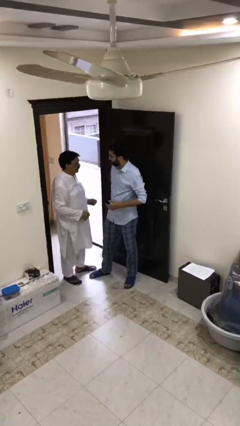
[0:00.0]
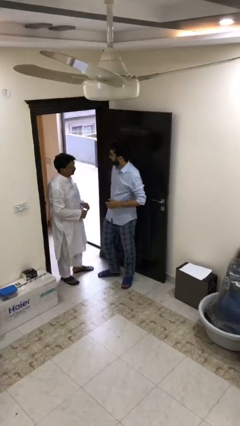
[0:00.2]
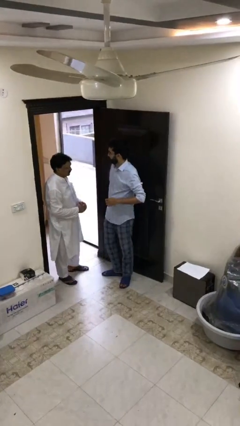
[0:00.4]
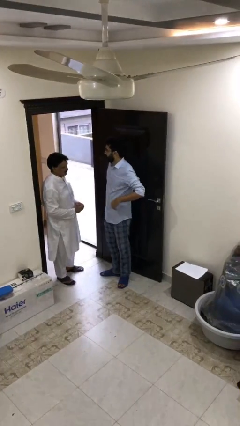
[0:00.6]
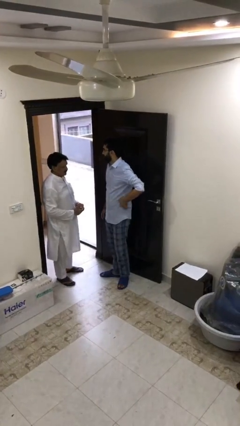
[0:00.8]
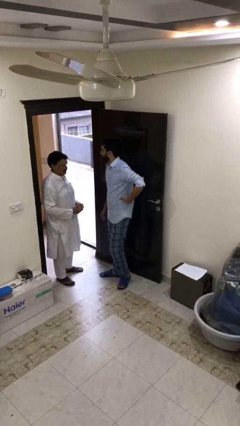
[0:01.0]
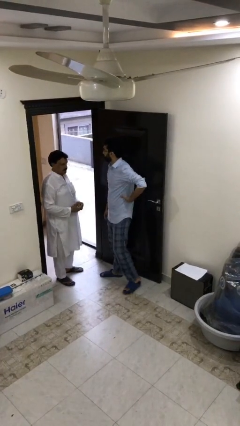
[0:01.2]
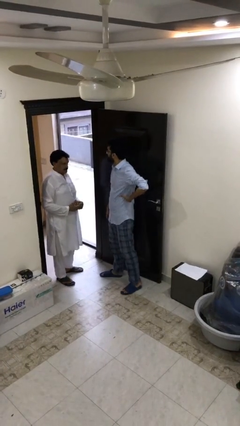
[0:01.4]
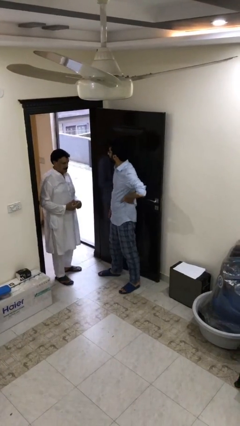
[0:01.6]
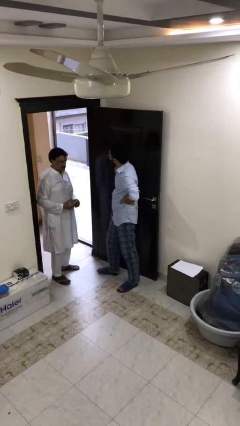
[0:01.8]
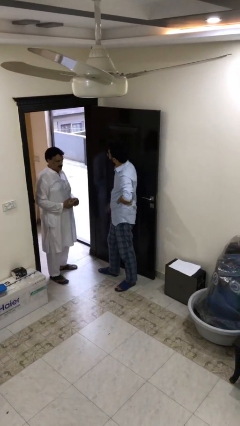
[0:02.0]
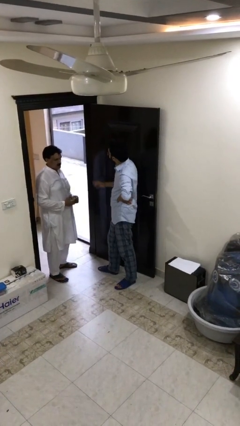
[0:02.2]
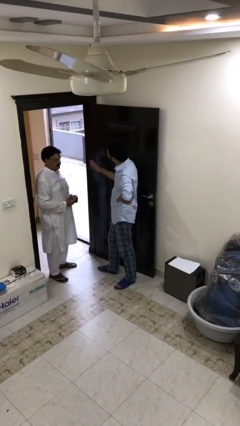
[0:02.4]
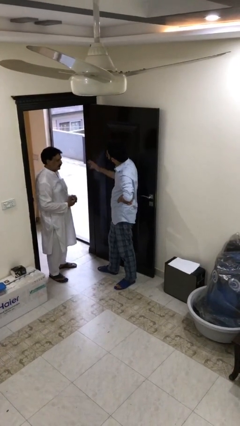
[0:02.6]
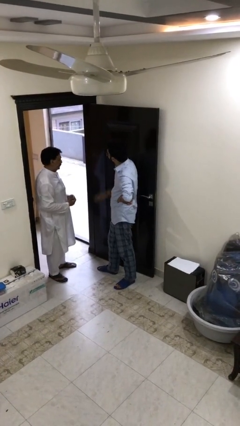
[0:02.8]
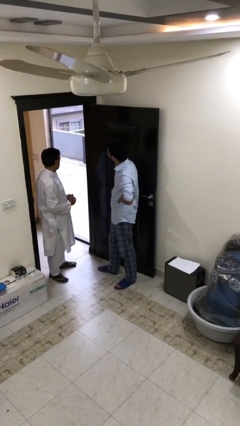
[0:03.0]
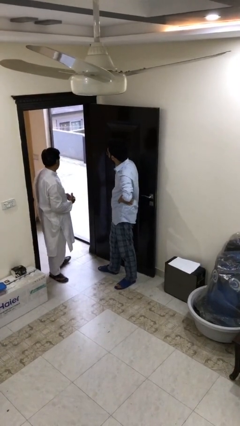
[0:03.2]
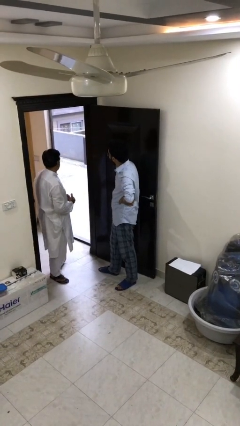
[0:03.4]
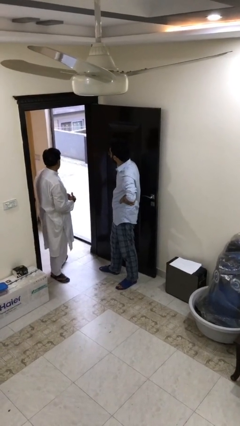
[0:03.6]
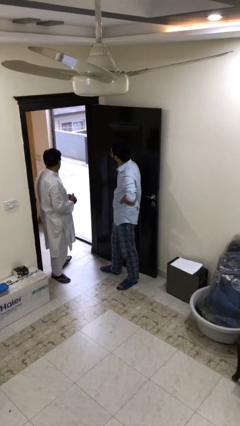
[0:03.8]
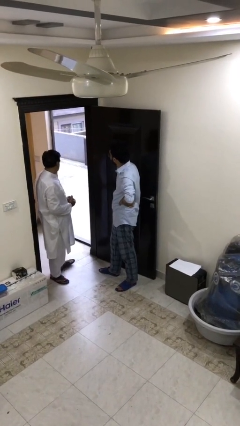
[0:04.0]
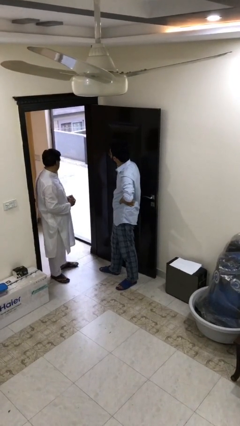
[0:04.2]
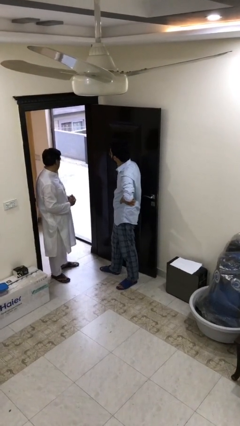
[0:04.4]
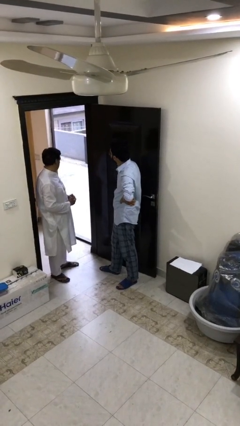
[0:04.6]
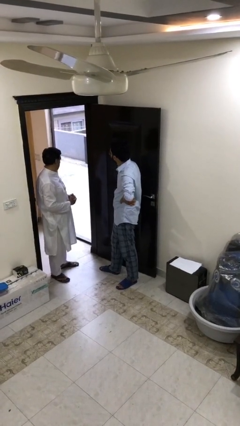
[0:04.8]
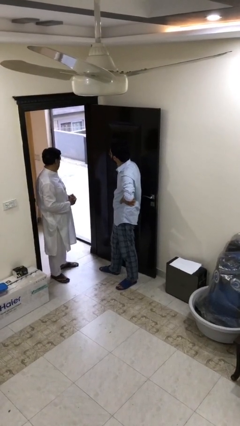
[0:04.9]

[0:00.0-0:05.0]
person talks to person

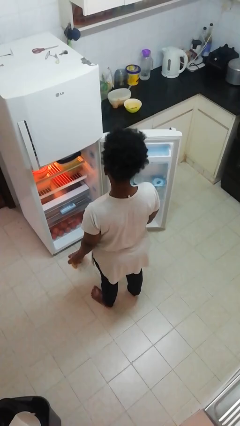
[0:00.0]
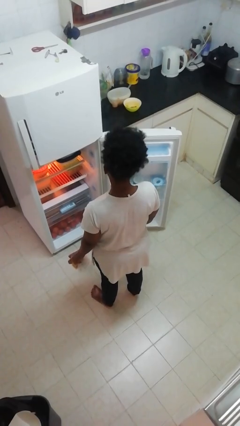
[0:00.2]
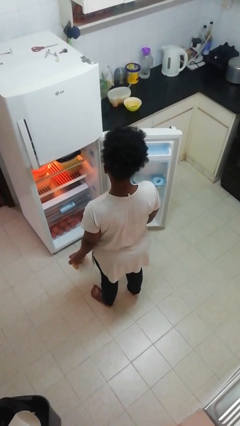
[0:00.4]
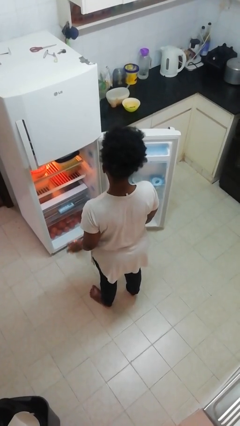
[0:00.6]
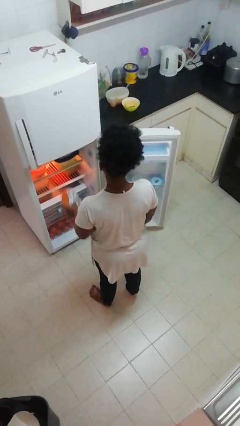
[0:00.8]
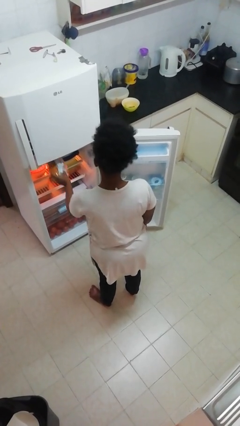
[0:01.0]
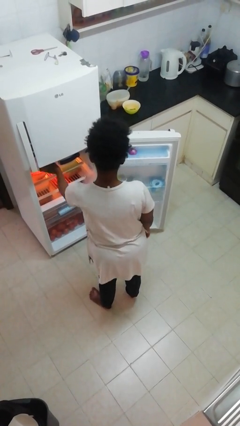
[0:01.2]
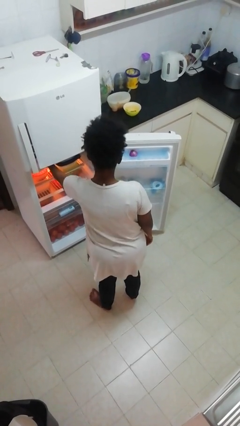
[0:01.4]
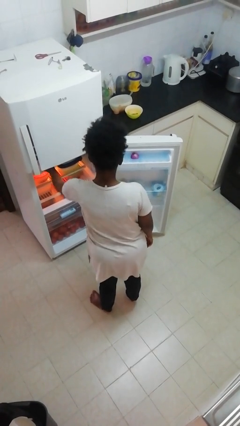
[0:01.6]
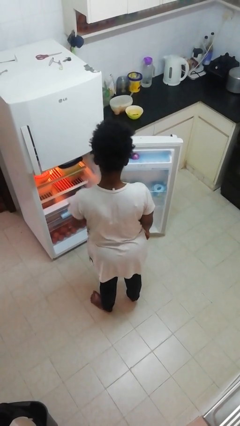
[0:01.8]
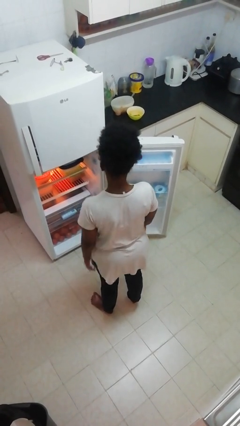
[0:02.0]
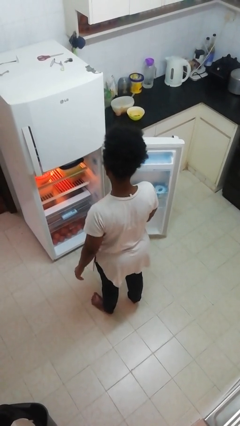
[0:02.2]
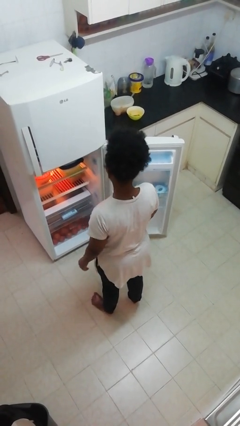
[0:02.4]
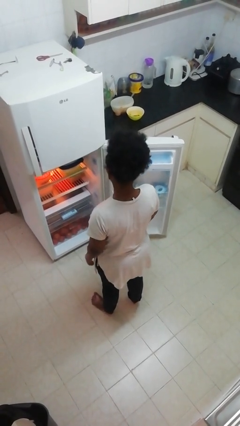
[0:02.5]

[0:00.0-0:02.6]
person puts object into refrigerator

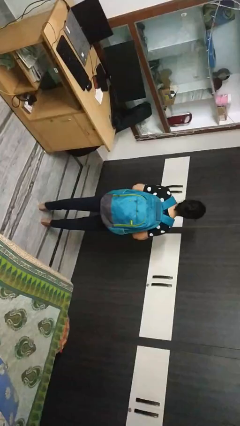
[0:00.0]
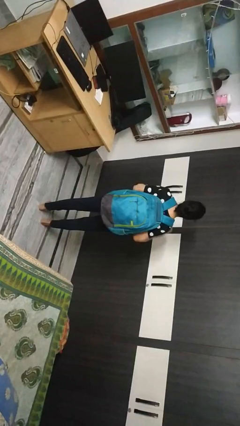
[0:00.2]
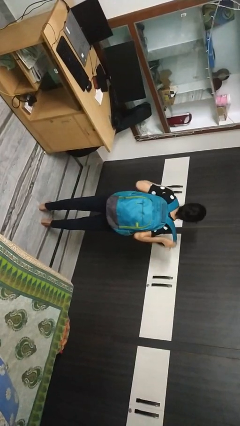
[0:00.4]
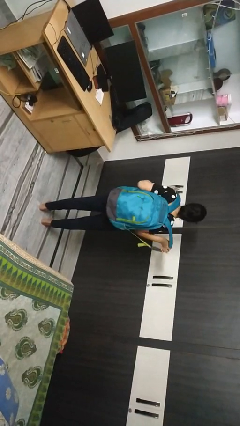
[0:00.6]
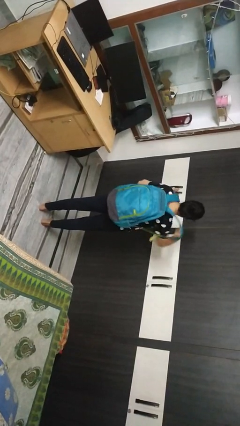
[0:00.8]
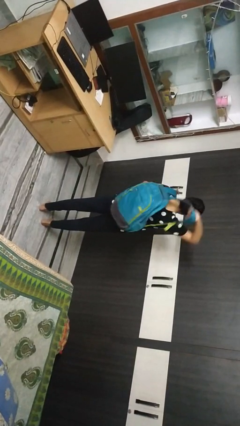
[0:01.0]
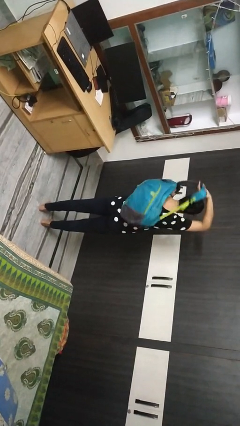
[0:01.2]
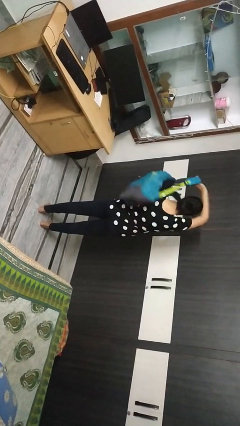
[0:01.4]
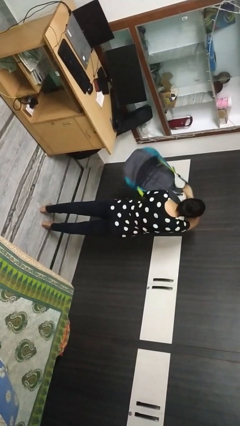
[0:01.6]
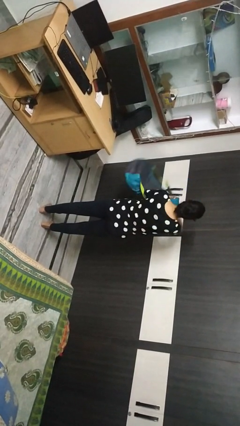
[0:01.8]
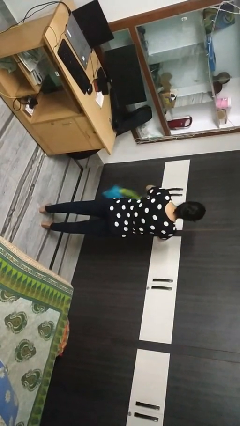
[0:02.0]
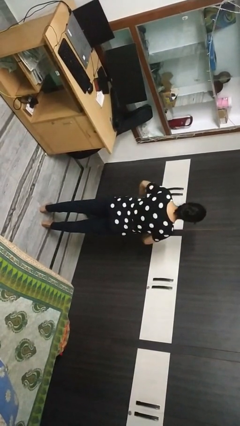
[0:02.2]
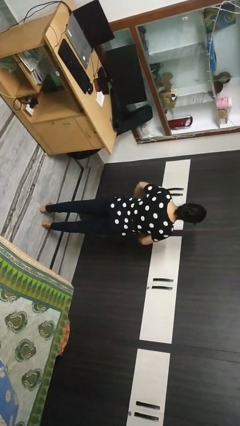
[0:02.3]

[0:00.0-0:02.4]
person takes off backpack

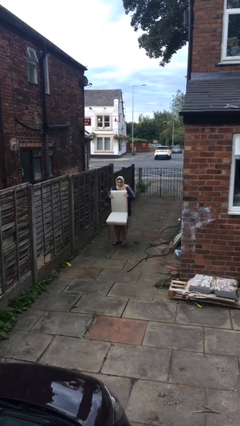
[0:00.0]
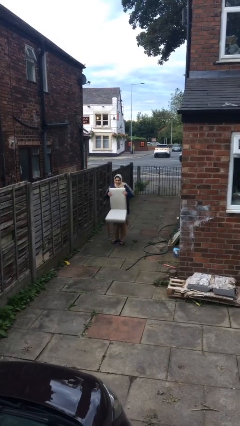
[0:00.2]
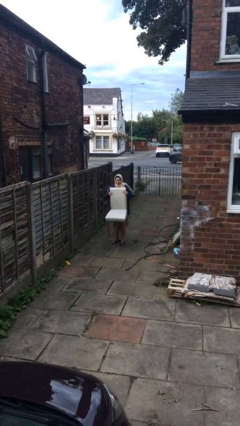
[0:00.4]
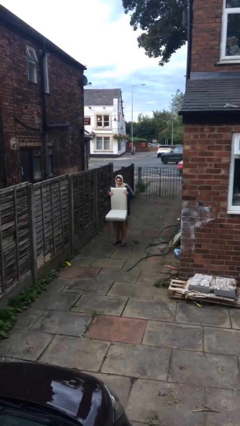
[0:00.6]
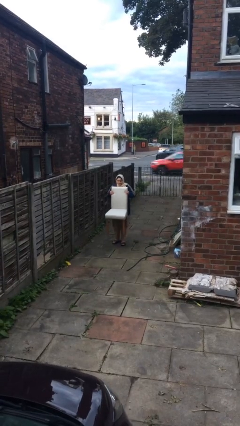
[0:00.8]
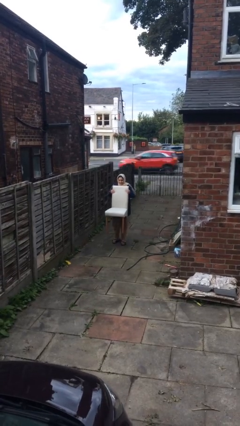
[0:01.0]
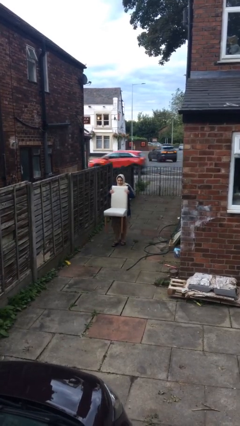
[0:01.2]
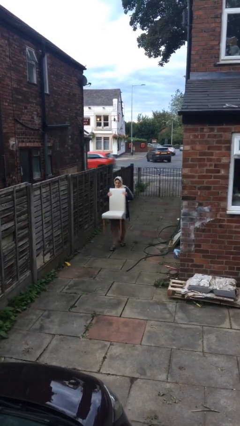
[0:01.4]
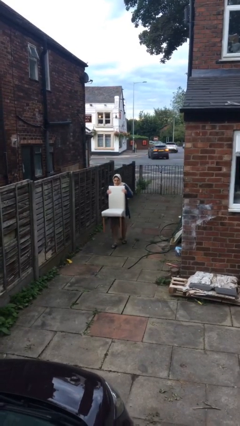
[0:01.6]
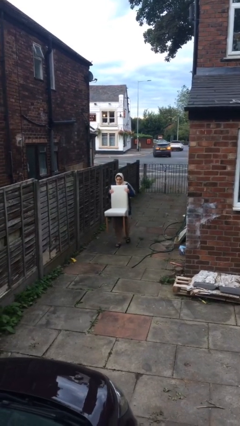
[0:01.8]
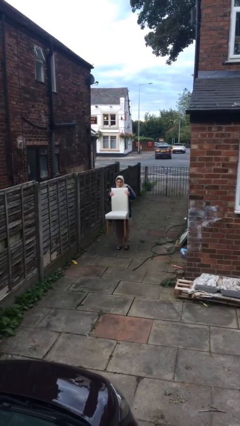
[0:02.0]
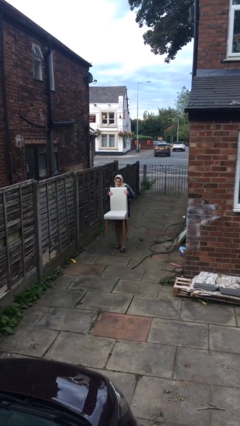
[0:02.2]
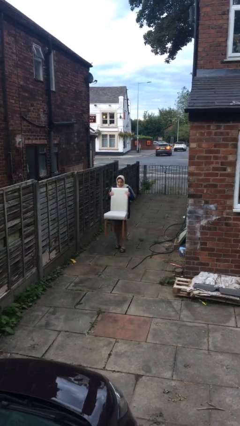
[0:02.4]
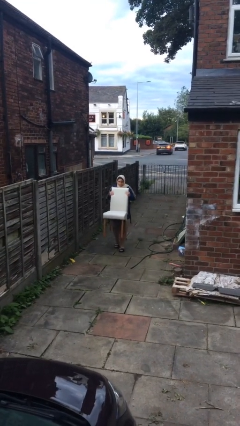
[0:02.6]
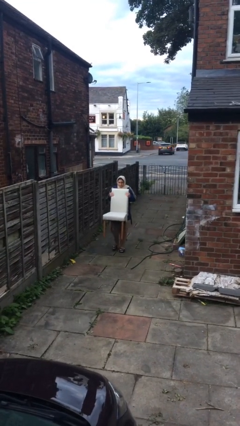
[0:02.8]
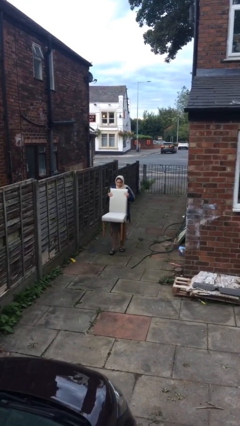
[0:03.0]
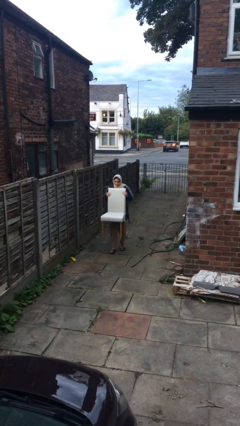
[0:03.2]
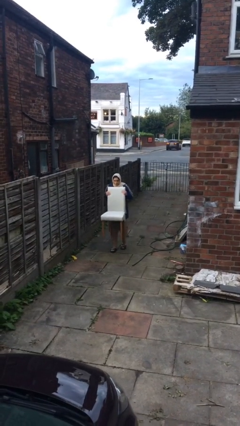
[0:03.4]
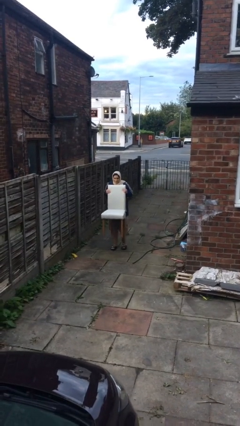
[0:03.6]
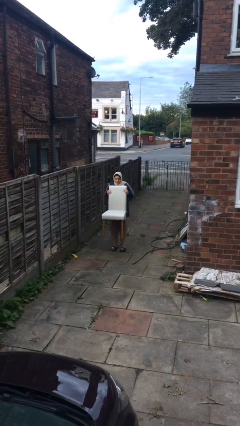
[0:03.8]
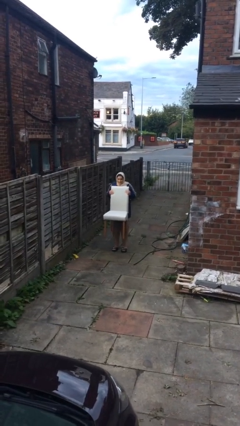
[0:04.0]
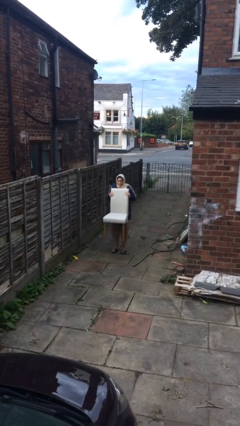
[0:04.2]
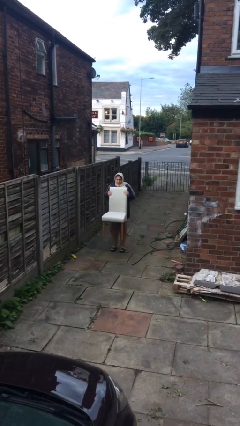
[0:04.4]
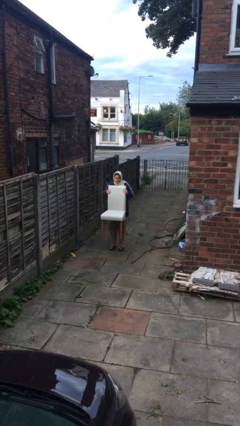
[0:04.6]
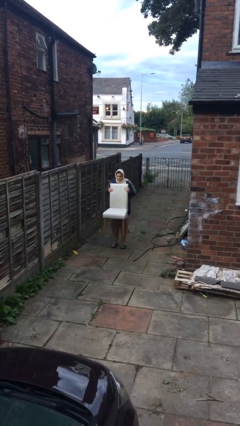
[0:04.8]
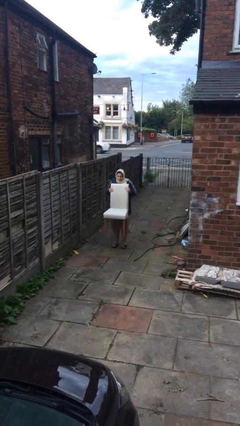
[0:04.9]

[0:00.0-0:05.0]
person carries heavy object

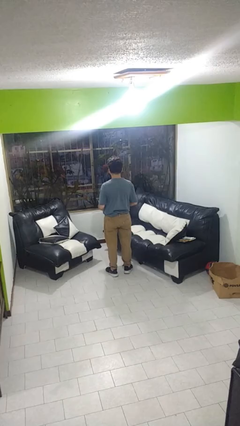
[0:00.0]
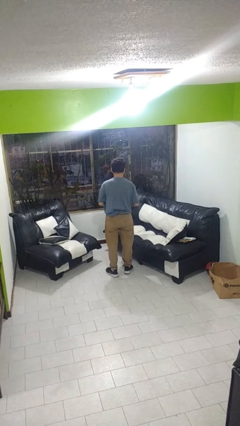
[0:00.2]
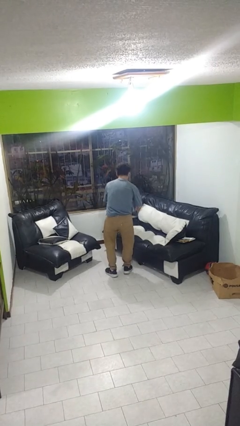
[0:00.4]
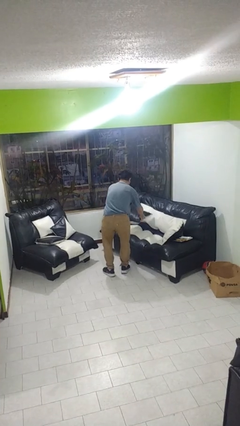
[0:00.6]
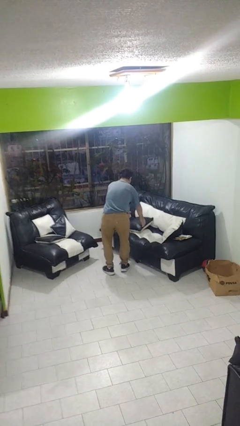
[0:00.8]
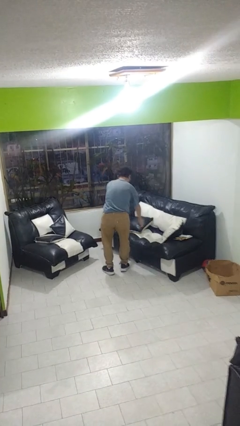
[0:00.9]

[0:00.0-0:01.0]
person puts down object on couch

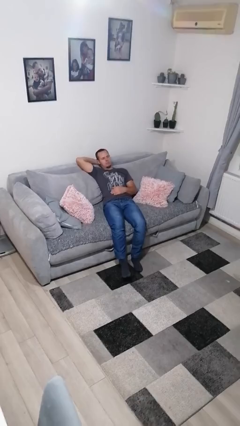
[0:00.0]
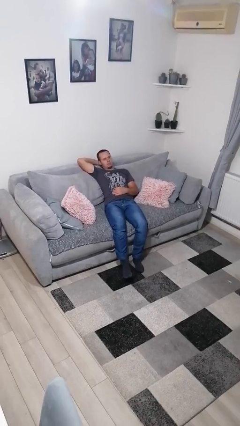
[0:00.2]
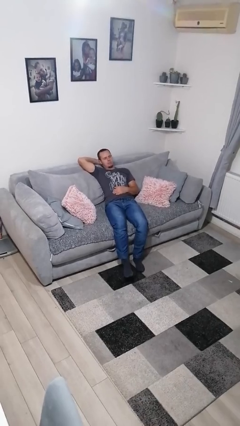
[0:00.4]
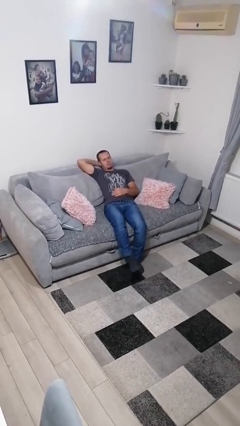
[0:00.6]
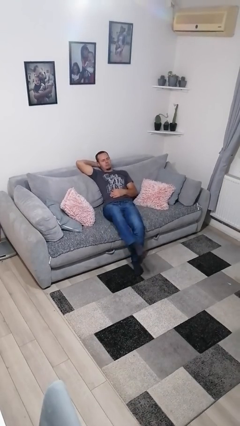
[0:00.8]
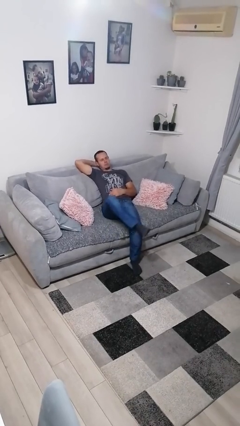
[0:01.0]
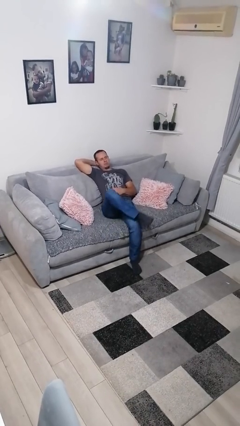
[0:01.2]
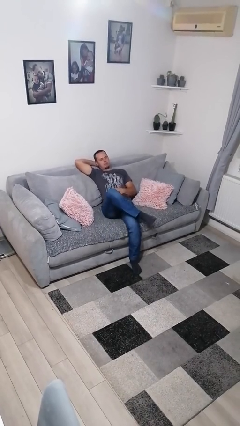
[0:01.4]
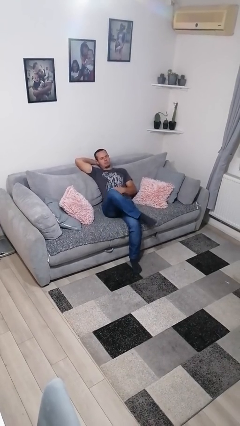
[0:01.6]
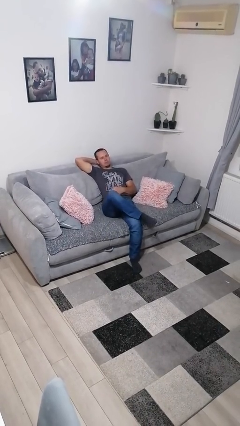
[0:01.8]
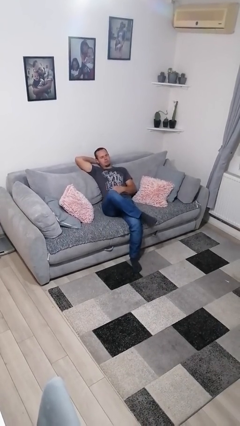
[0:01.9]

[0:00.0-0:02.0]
person crosses legs
